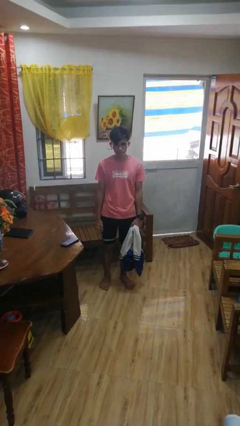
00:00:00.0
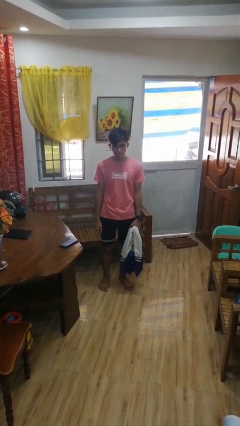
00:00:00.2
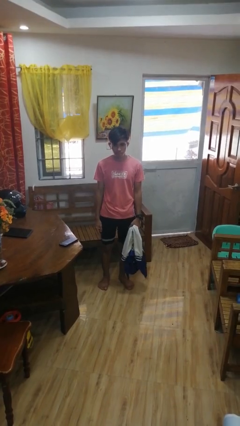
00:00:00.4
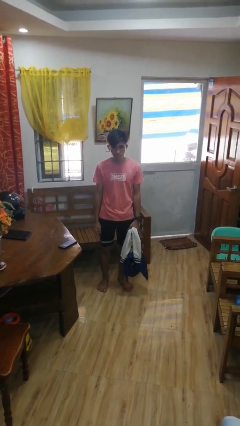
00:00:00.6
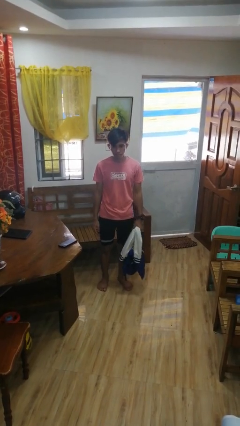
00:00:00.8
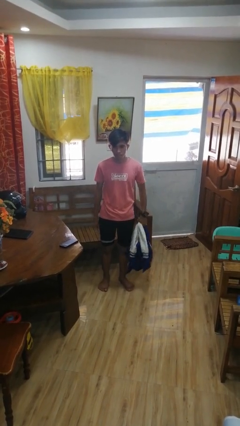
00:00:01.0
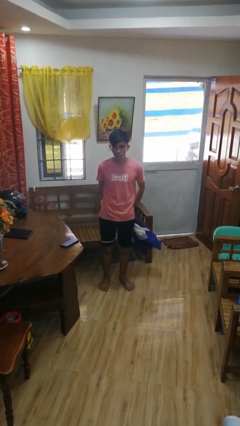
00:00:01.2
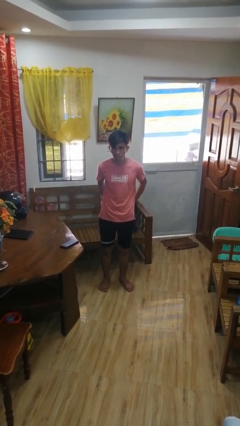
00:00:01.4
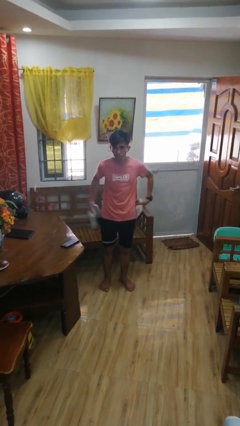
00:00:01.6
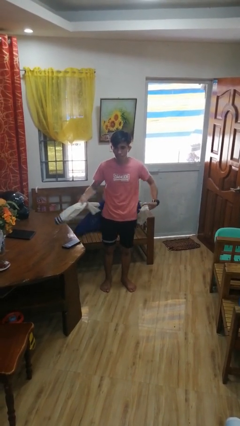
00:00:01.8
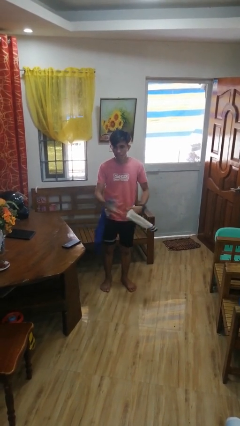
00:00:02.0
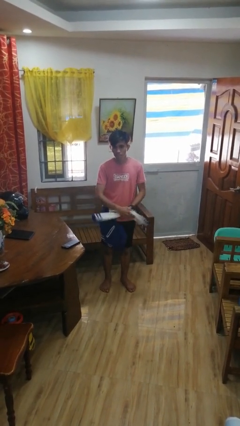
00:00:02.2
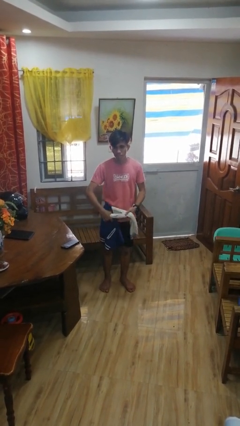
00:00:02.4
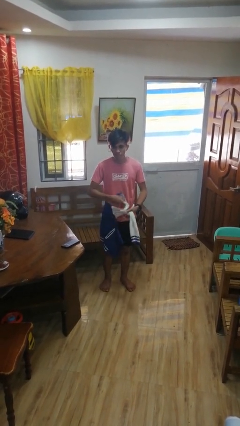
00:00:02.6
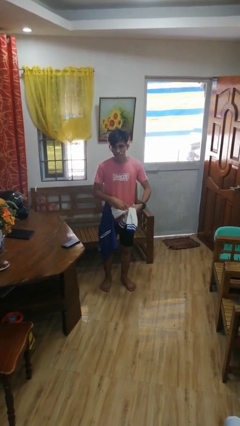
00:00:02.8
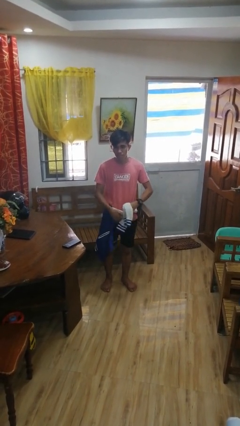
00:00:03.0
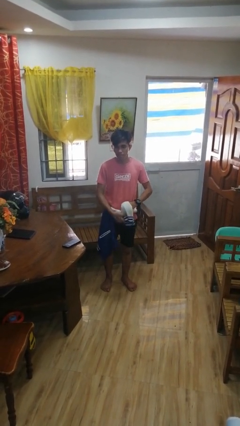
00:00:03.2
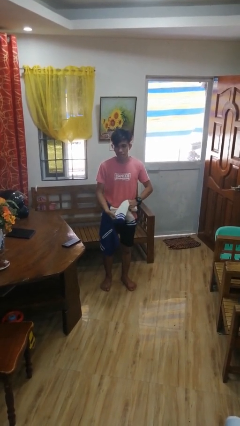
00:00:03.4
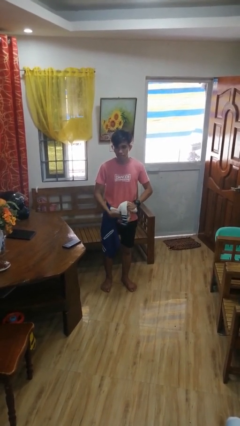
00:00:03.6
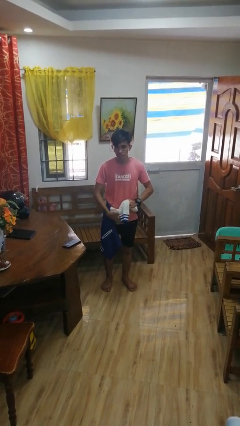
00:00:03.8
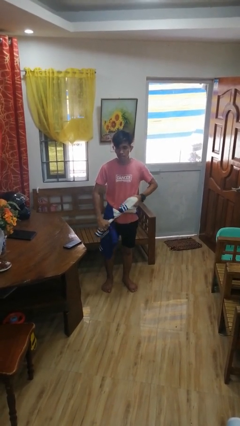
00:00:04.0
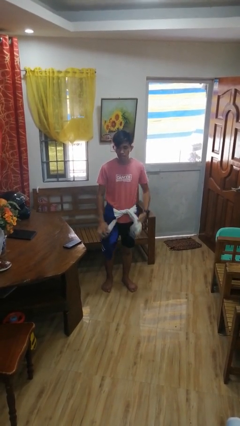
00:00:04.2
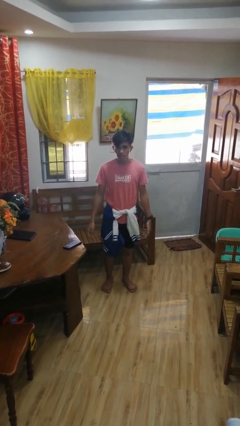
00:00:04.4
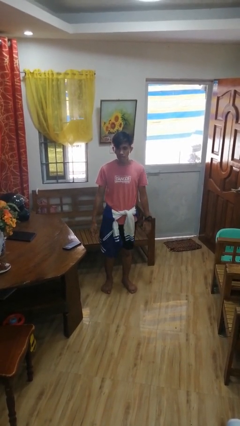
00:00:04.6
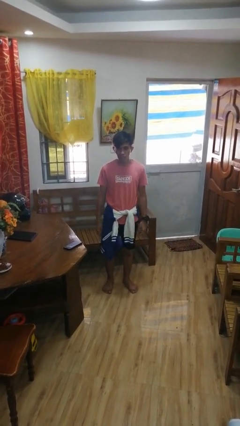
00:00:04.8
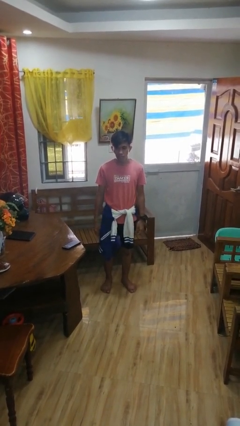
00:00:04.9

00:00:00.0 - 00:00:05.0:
person ties jacket around waist

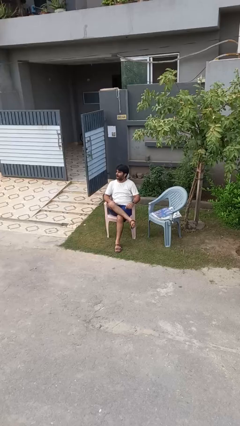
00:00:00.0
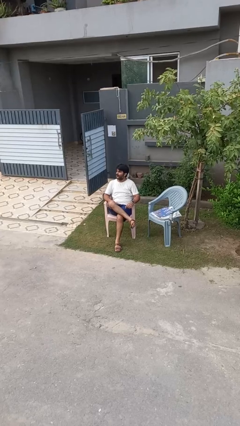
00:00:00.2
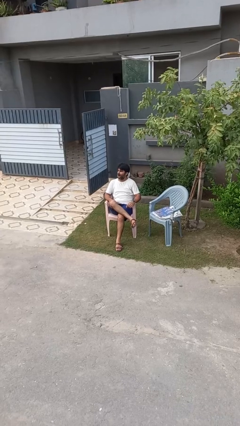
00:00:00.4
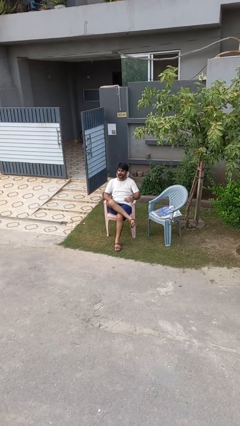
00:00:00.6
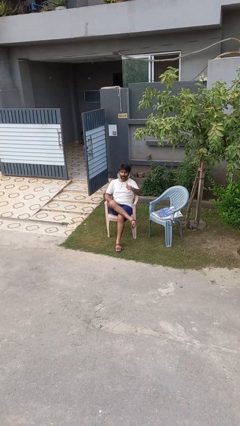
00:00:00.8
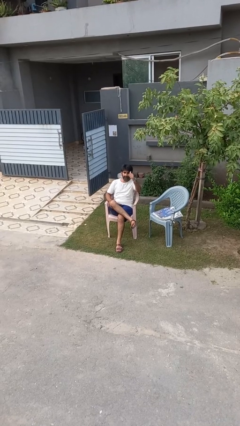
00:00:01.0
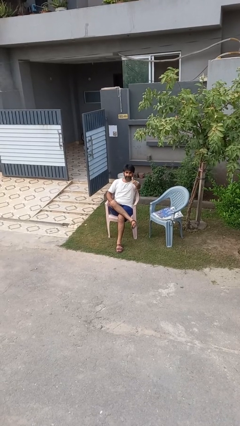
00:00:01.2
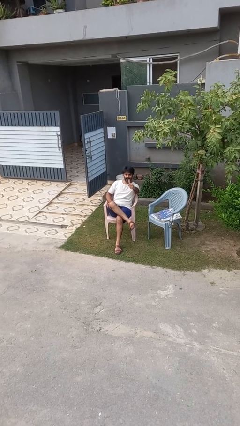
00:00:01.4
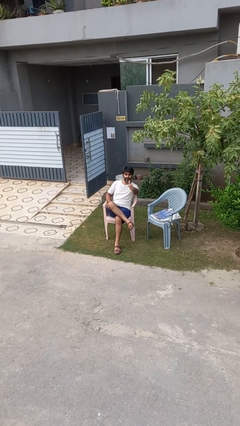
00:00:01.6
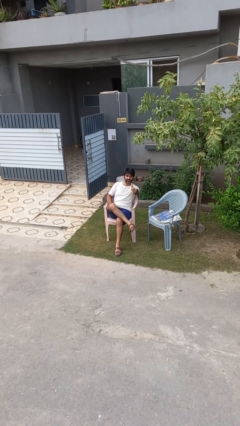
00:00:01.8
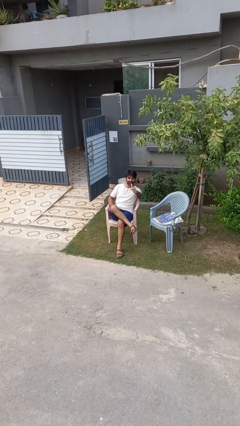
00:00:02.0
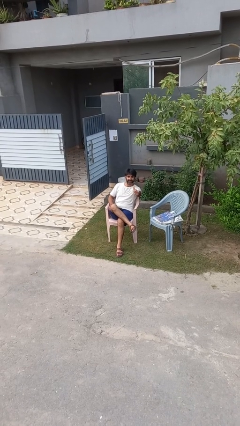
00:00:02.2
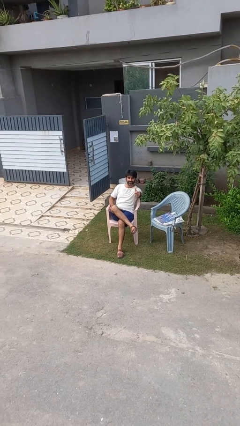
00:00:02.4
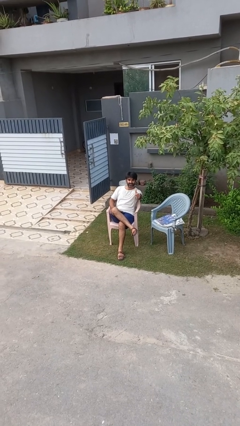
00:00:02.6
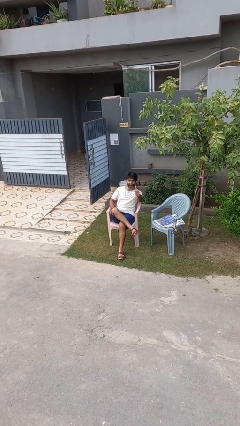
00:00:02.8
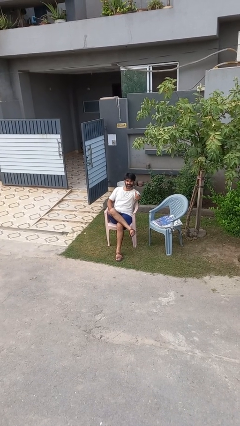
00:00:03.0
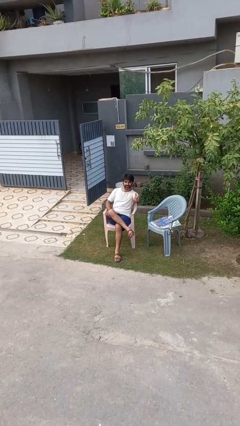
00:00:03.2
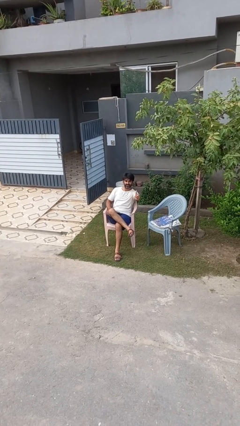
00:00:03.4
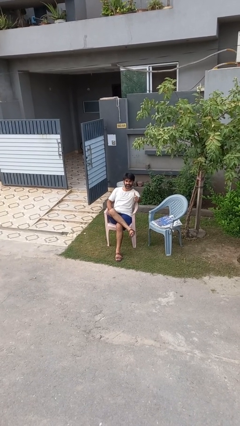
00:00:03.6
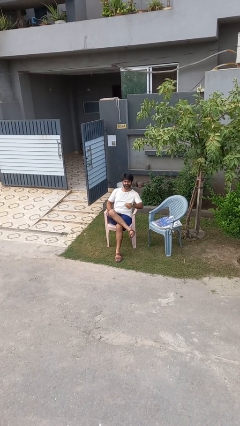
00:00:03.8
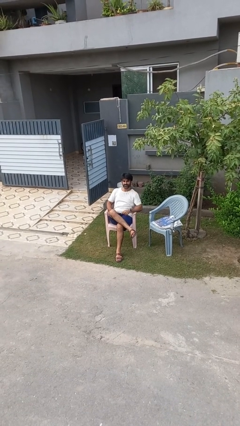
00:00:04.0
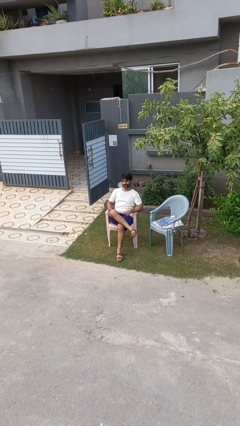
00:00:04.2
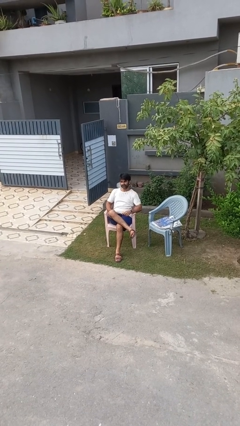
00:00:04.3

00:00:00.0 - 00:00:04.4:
person gestures thumbs up

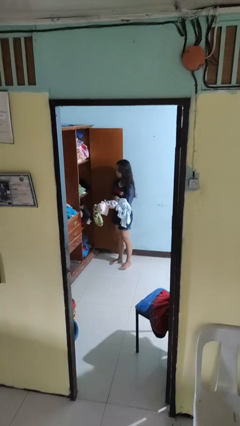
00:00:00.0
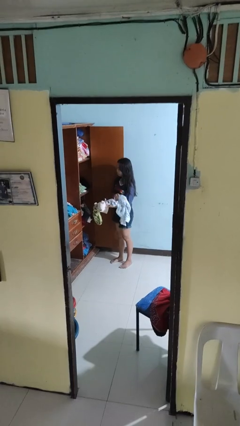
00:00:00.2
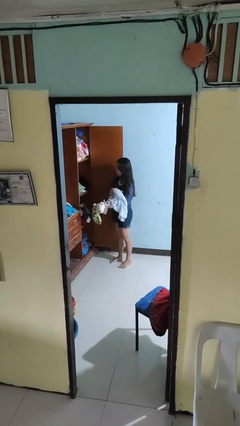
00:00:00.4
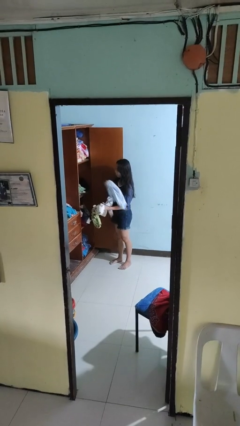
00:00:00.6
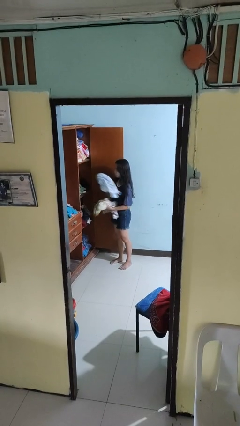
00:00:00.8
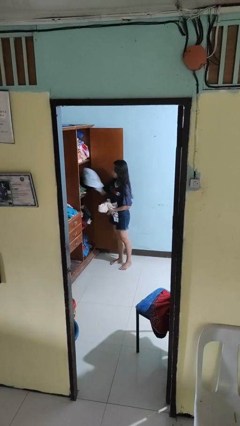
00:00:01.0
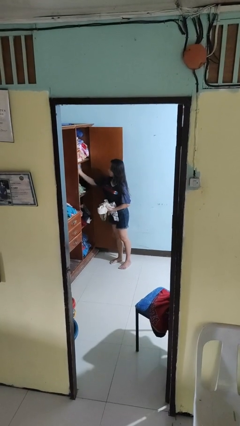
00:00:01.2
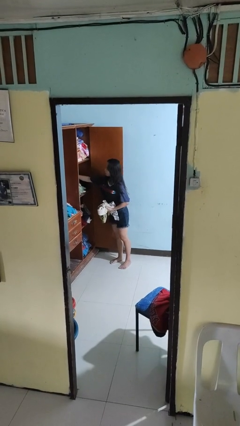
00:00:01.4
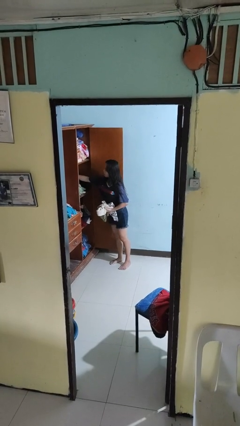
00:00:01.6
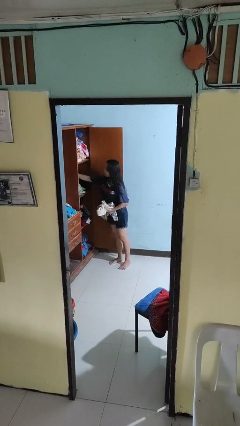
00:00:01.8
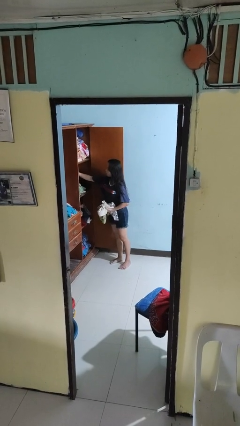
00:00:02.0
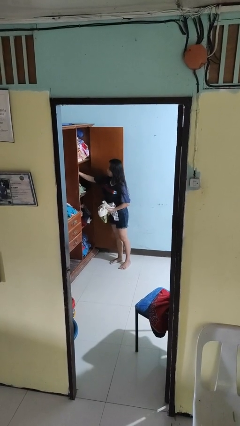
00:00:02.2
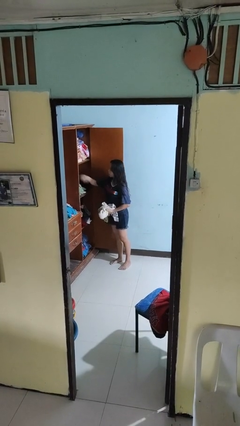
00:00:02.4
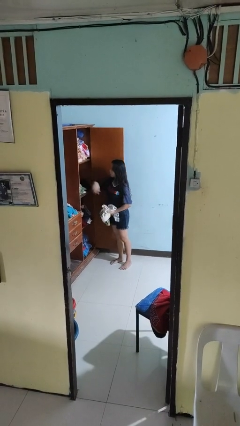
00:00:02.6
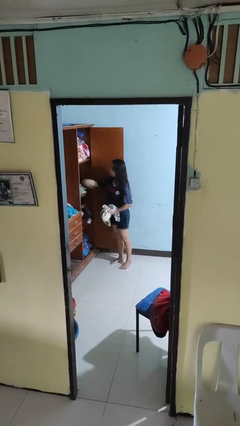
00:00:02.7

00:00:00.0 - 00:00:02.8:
person puts clothes into dresser

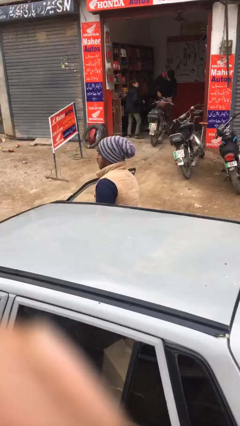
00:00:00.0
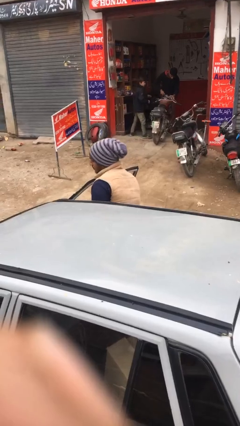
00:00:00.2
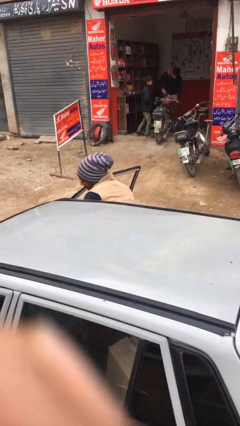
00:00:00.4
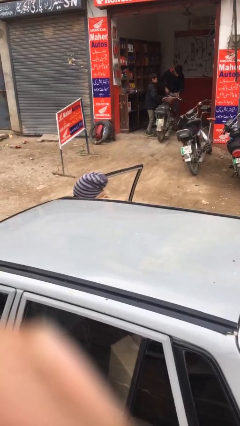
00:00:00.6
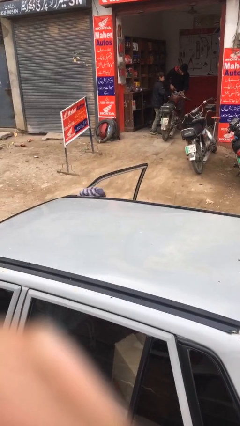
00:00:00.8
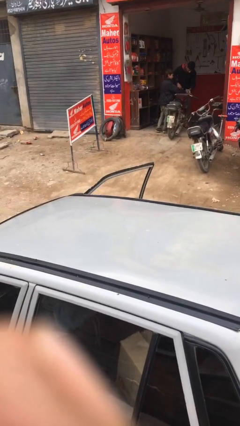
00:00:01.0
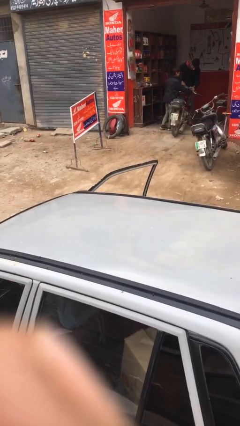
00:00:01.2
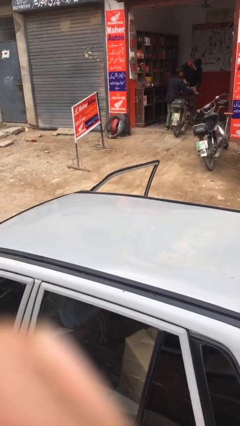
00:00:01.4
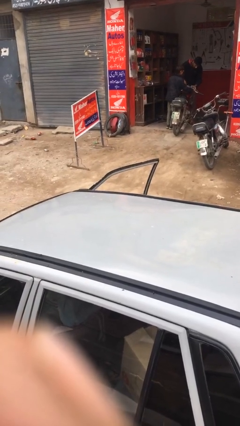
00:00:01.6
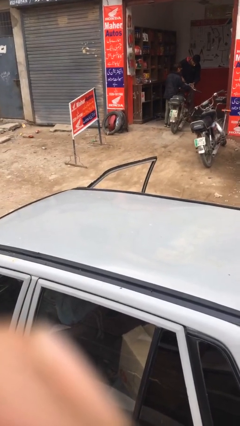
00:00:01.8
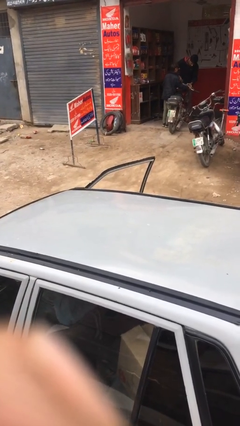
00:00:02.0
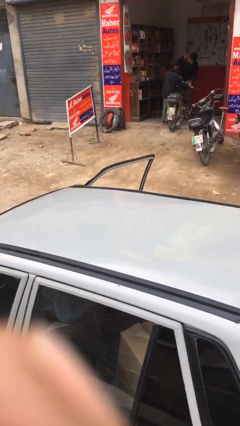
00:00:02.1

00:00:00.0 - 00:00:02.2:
person enters car

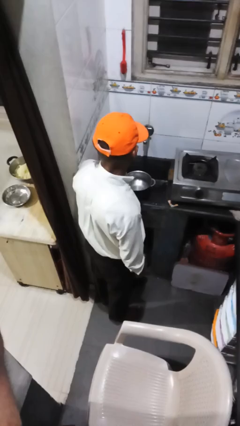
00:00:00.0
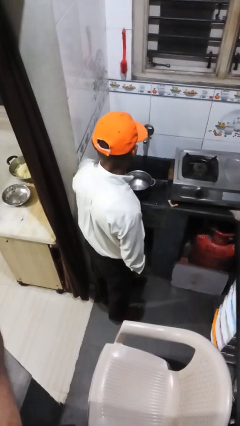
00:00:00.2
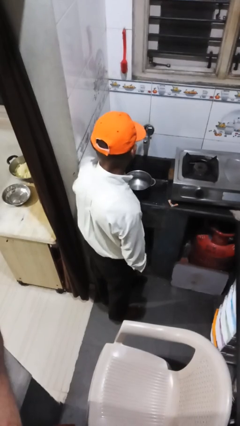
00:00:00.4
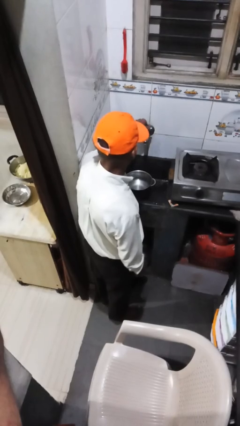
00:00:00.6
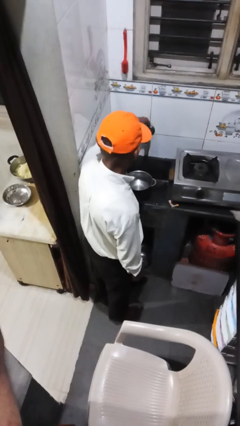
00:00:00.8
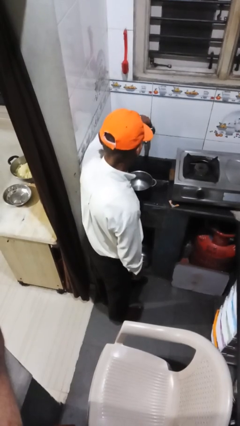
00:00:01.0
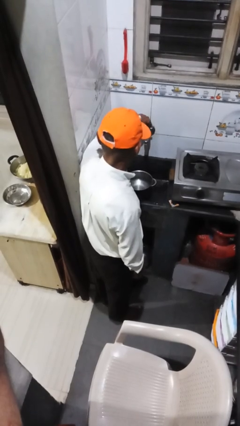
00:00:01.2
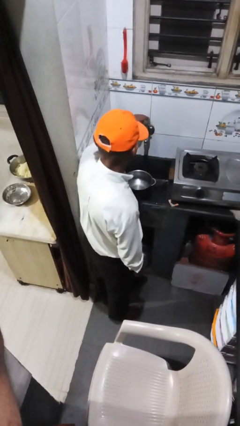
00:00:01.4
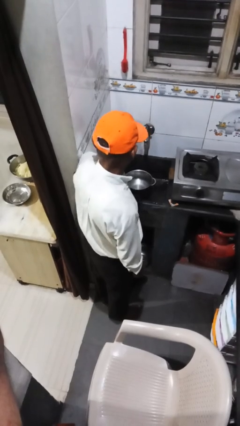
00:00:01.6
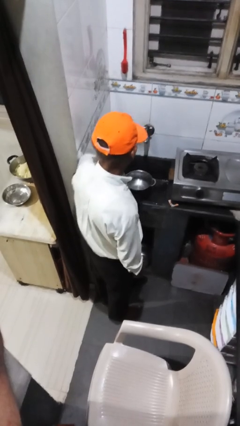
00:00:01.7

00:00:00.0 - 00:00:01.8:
person turns off faucet

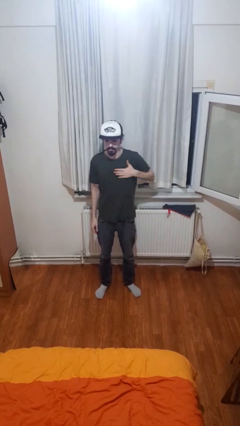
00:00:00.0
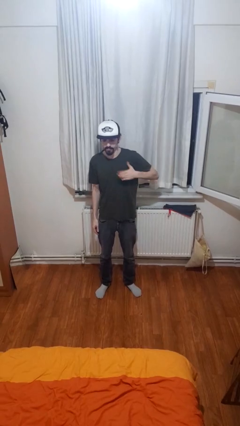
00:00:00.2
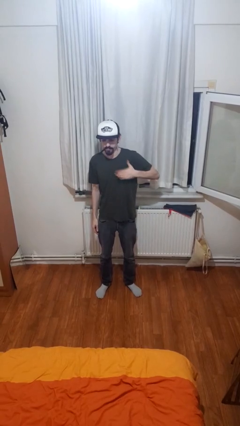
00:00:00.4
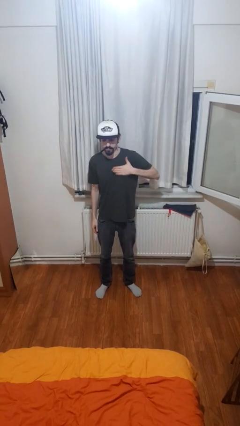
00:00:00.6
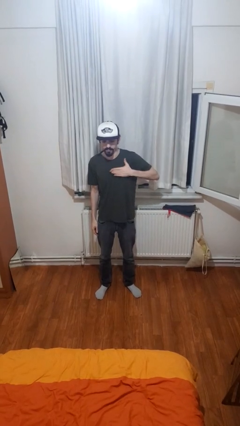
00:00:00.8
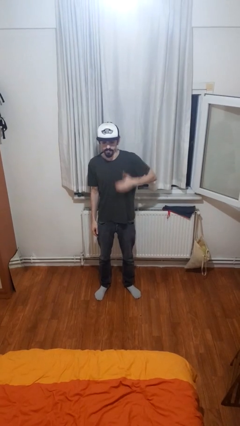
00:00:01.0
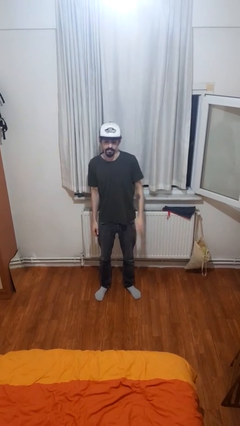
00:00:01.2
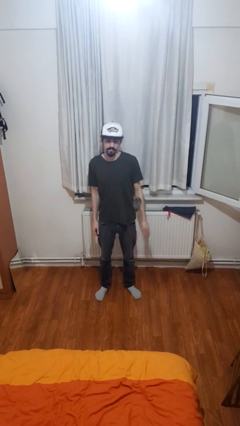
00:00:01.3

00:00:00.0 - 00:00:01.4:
person drums on chest
